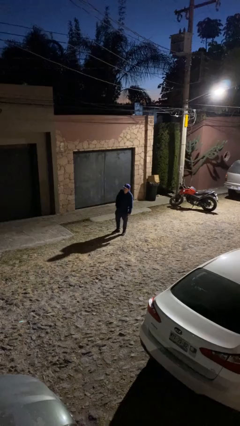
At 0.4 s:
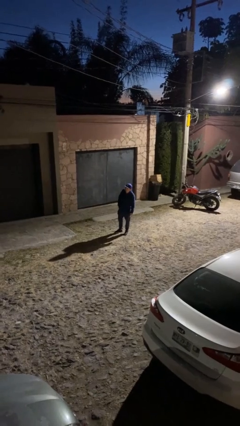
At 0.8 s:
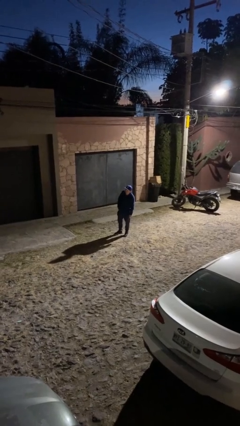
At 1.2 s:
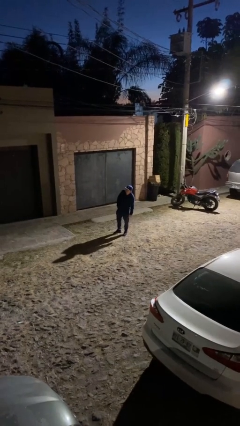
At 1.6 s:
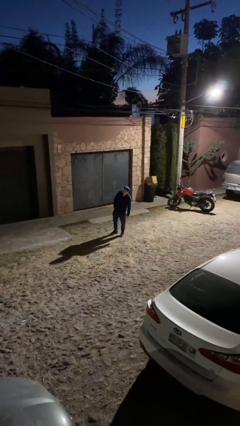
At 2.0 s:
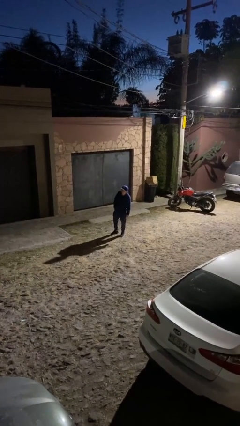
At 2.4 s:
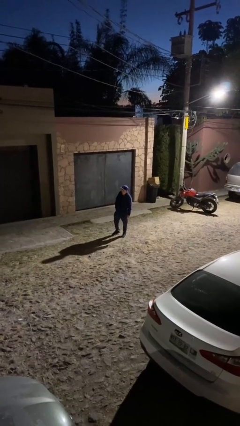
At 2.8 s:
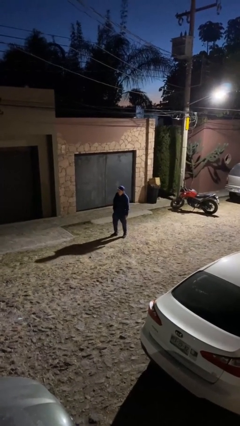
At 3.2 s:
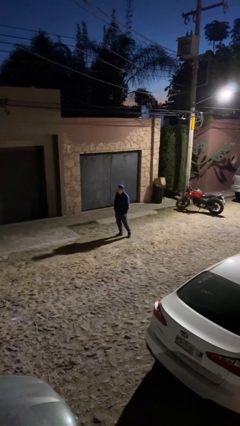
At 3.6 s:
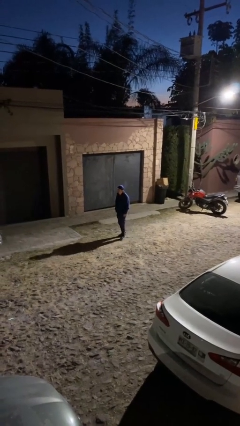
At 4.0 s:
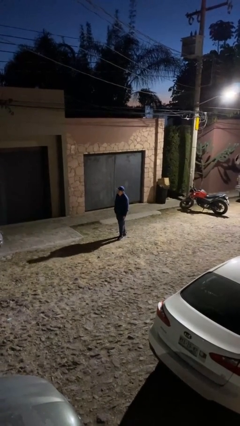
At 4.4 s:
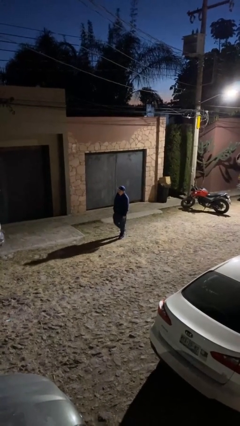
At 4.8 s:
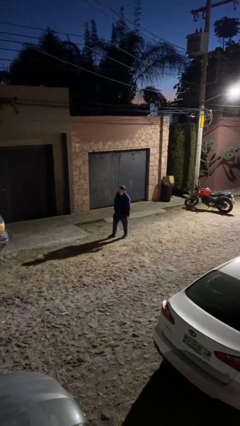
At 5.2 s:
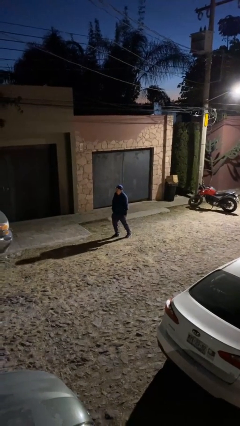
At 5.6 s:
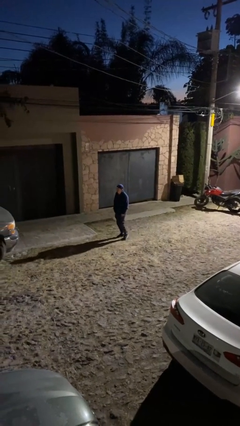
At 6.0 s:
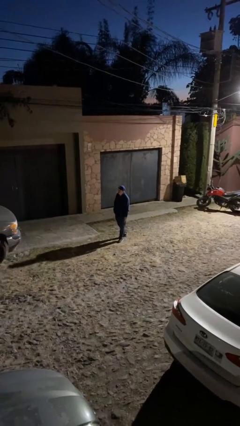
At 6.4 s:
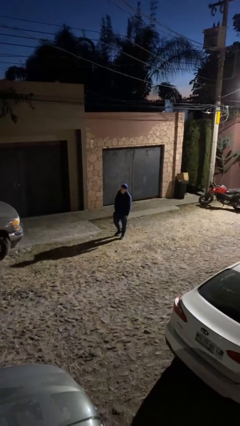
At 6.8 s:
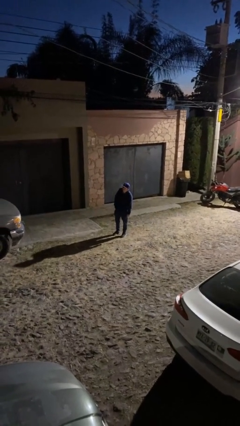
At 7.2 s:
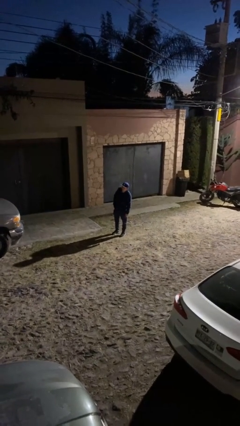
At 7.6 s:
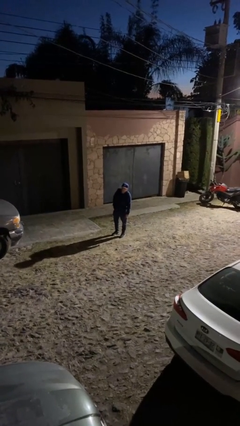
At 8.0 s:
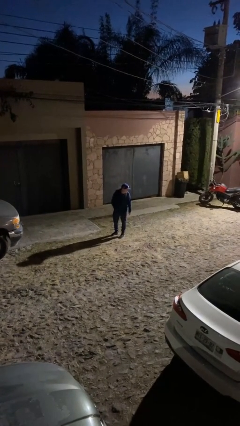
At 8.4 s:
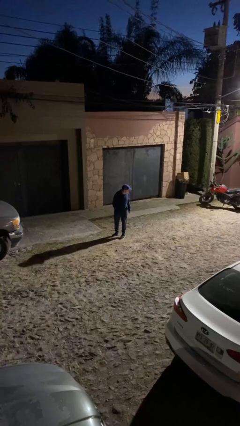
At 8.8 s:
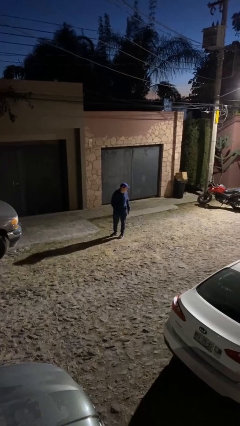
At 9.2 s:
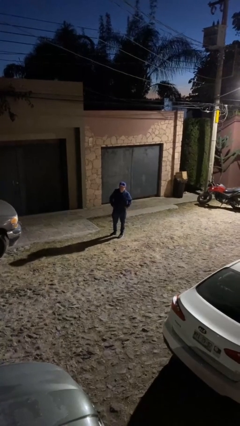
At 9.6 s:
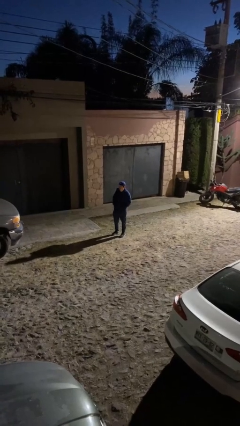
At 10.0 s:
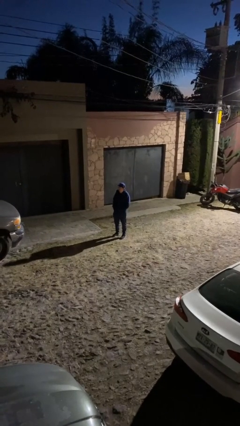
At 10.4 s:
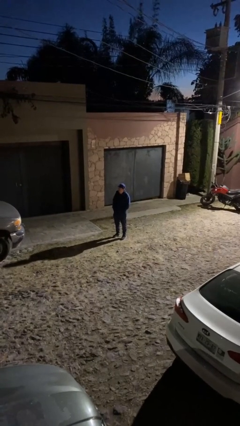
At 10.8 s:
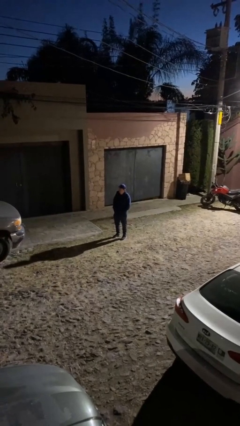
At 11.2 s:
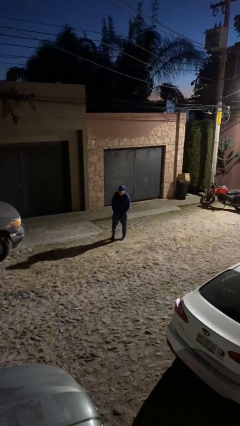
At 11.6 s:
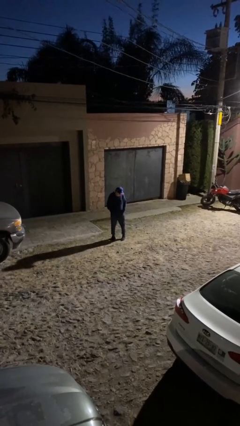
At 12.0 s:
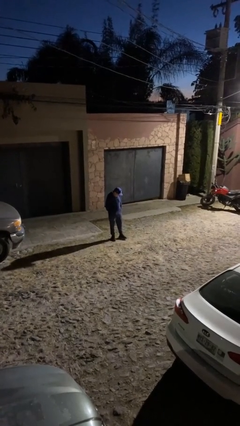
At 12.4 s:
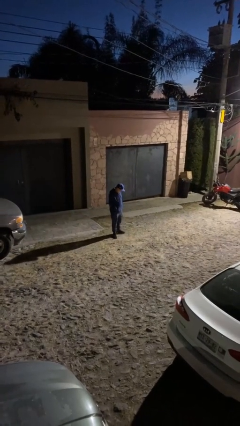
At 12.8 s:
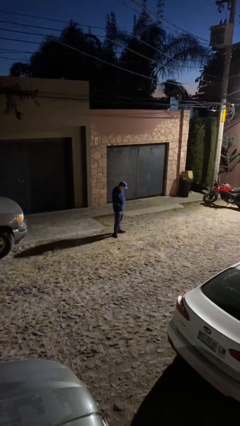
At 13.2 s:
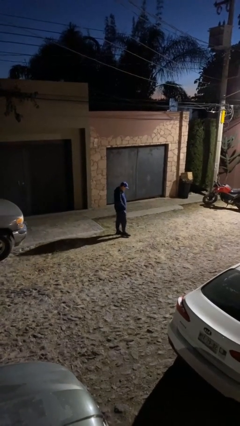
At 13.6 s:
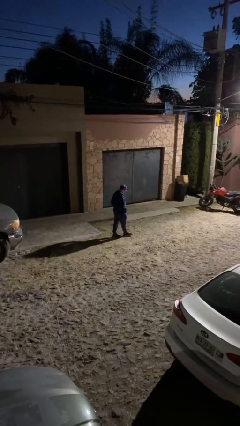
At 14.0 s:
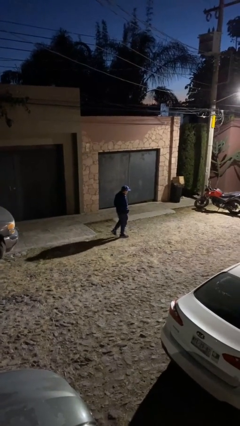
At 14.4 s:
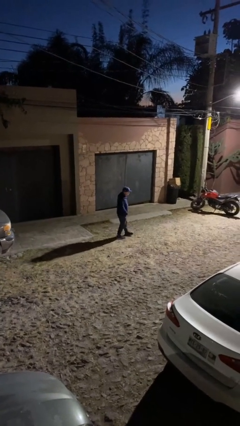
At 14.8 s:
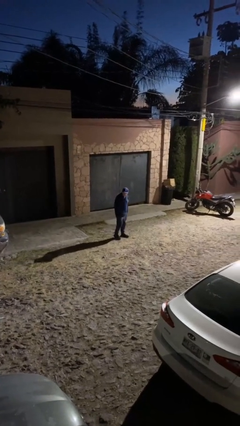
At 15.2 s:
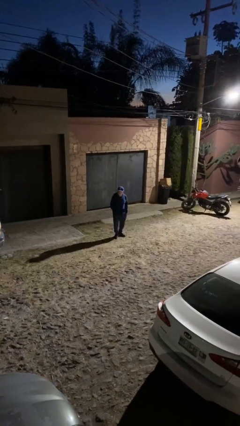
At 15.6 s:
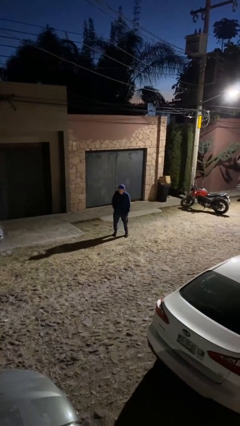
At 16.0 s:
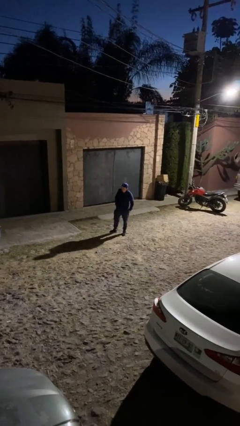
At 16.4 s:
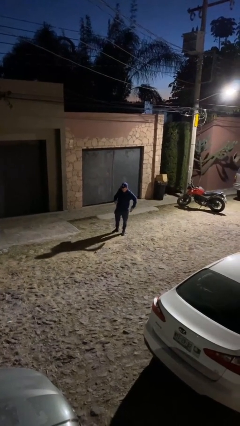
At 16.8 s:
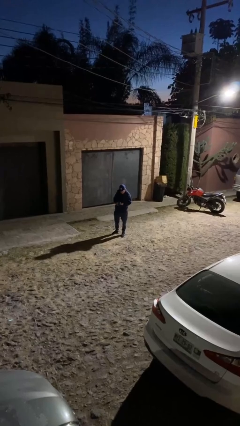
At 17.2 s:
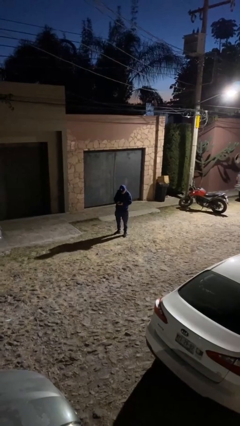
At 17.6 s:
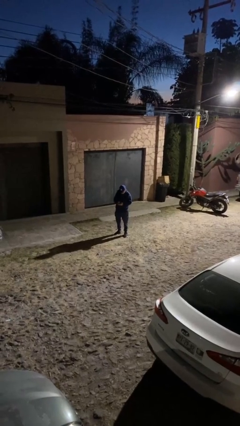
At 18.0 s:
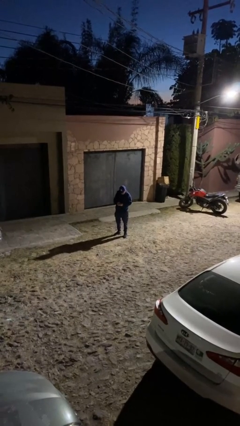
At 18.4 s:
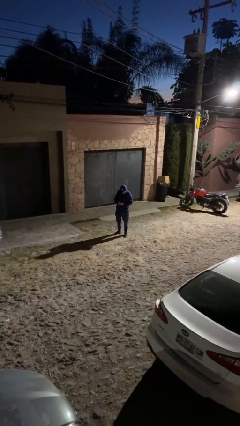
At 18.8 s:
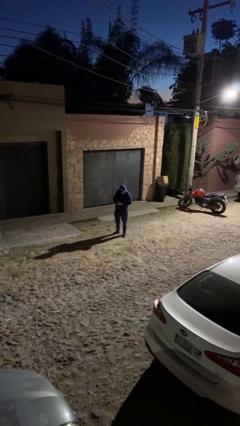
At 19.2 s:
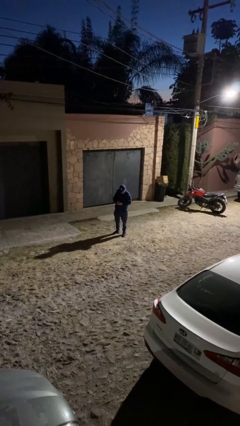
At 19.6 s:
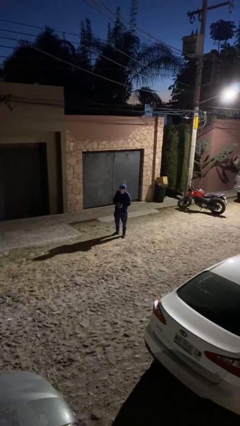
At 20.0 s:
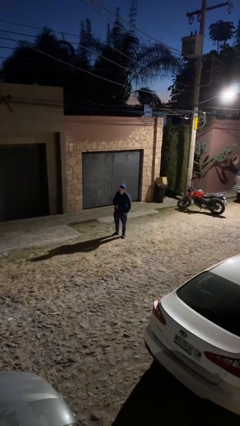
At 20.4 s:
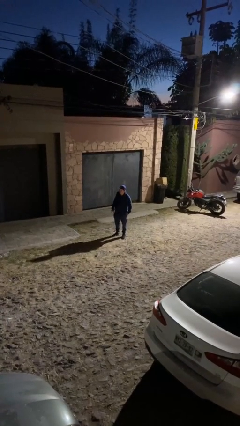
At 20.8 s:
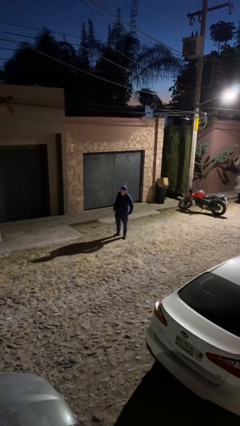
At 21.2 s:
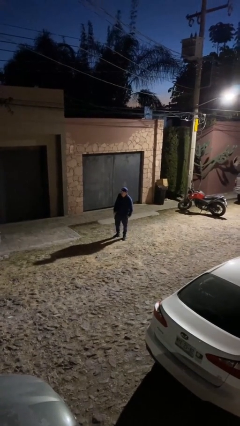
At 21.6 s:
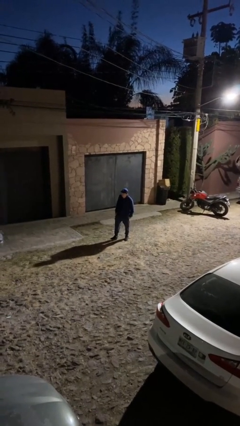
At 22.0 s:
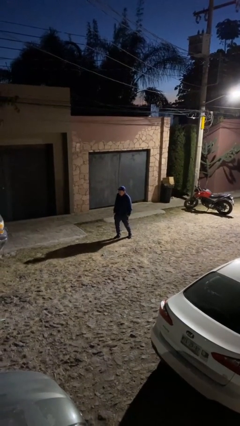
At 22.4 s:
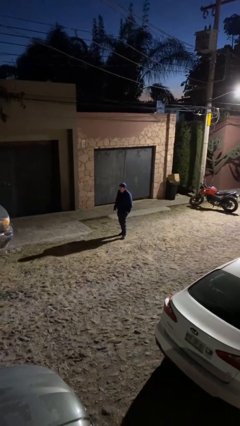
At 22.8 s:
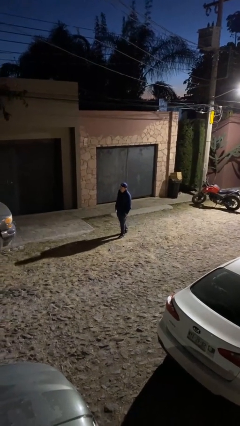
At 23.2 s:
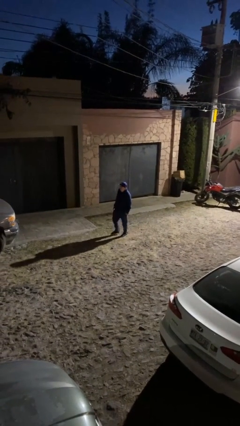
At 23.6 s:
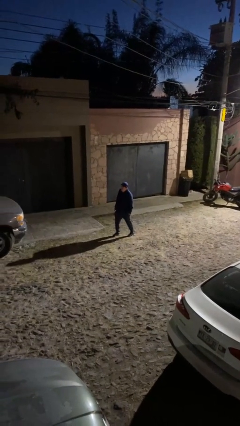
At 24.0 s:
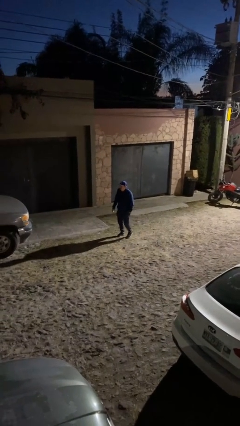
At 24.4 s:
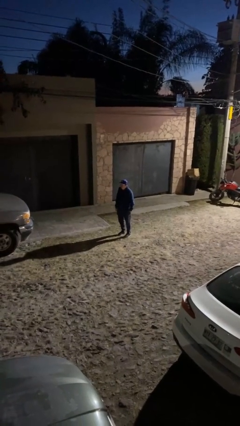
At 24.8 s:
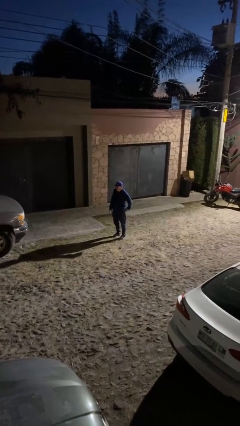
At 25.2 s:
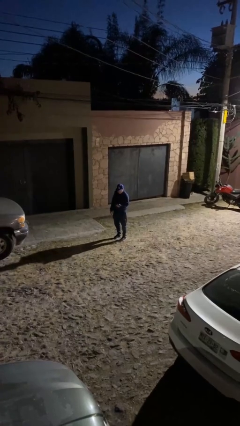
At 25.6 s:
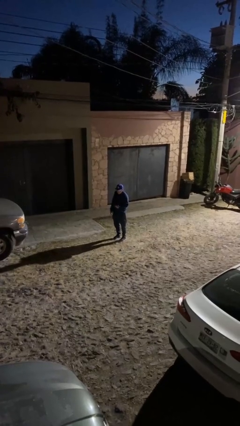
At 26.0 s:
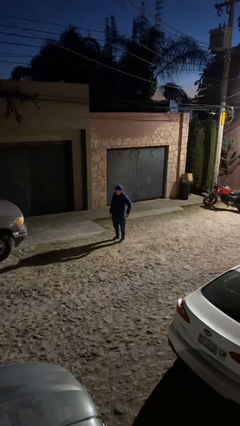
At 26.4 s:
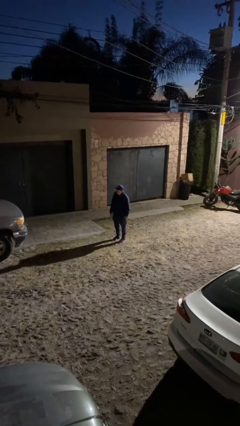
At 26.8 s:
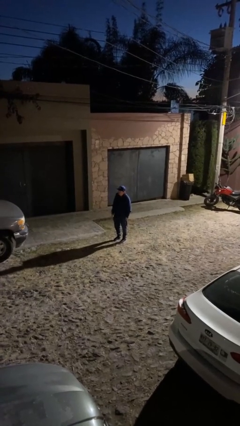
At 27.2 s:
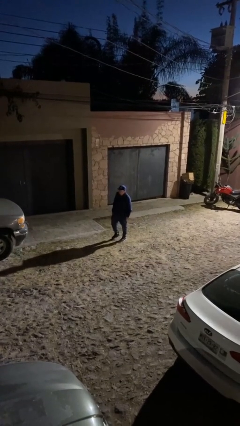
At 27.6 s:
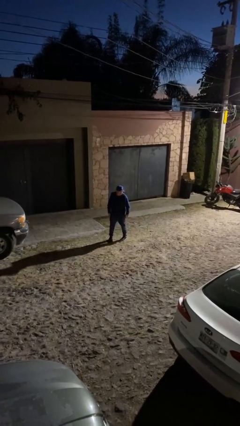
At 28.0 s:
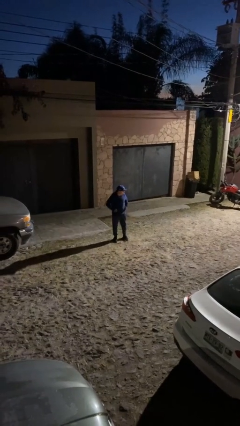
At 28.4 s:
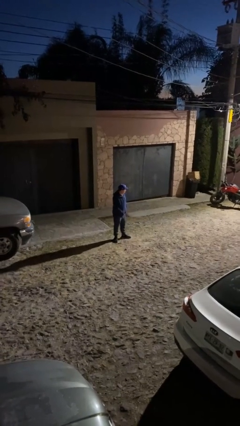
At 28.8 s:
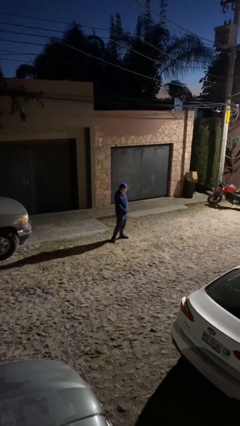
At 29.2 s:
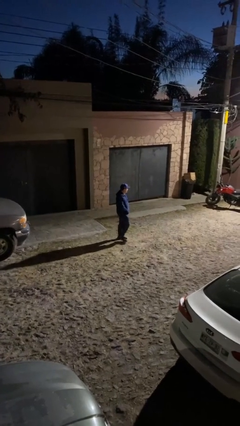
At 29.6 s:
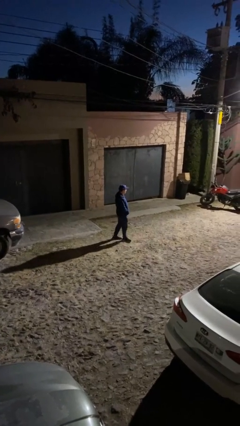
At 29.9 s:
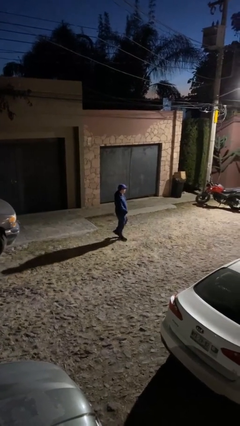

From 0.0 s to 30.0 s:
person walks

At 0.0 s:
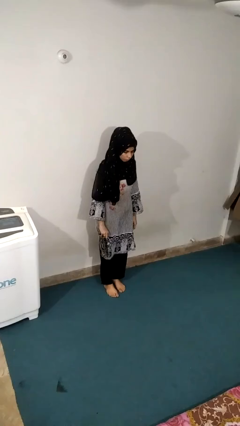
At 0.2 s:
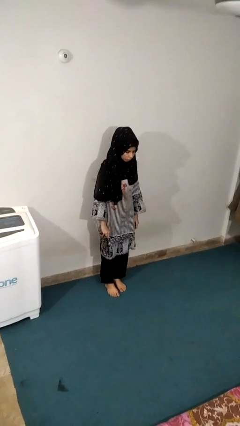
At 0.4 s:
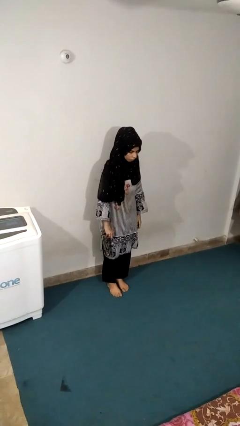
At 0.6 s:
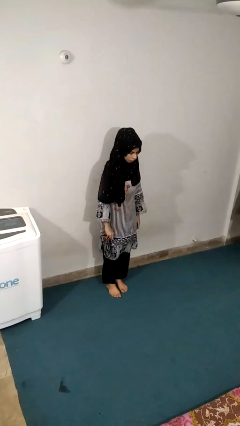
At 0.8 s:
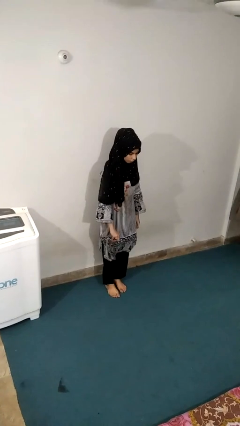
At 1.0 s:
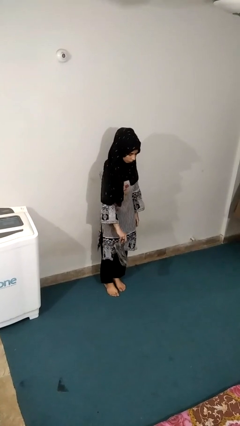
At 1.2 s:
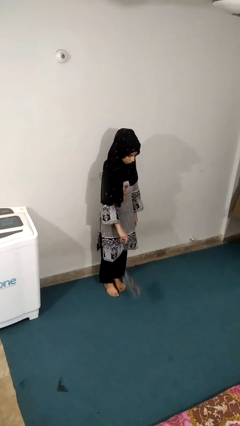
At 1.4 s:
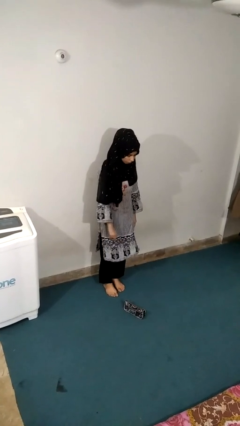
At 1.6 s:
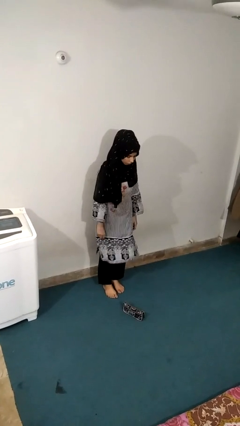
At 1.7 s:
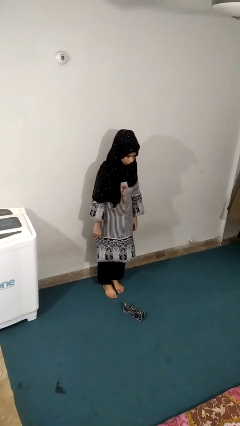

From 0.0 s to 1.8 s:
person throws object to ground

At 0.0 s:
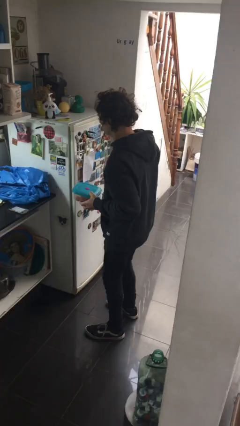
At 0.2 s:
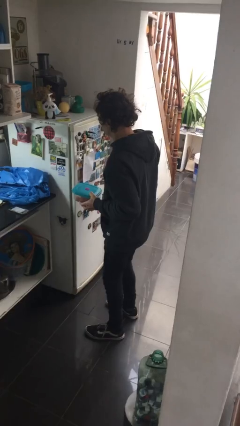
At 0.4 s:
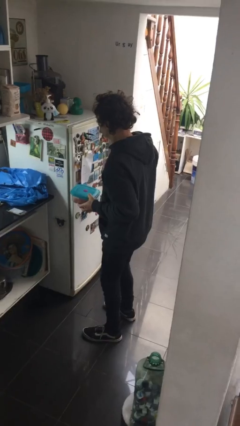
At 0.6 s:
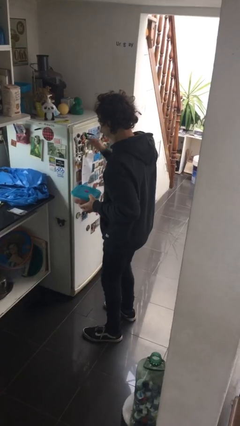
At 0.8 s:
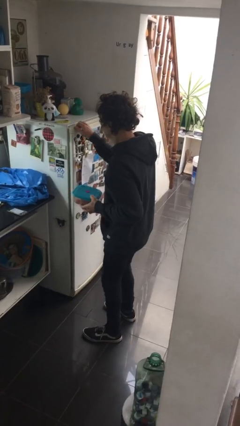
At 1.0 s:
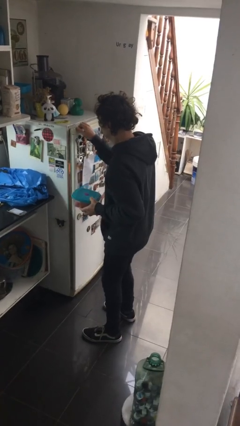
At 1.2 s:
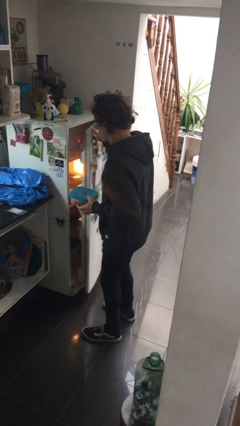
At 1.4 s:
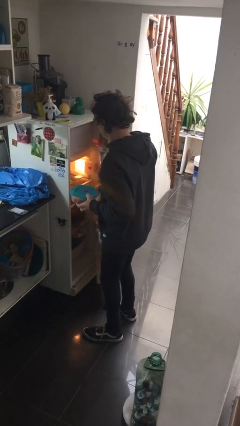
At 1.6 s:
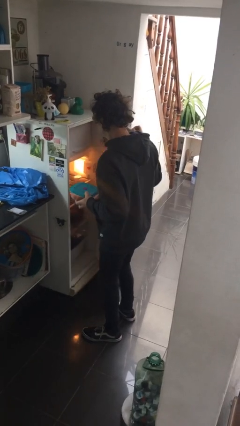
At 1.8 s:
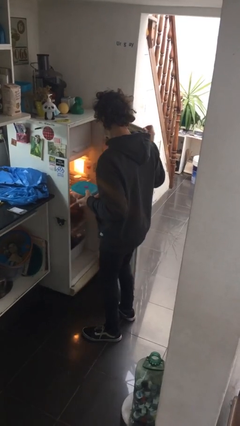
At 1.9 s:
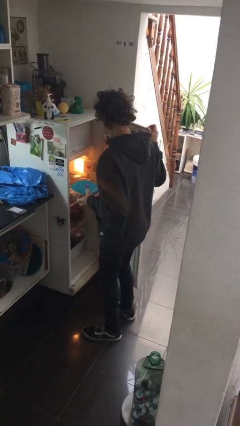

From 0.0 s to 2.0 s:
person opens refrigerator
